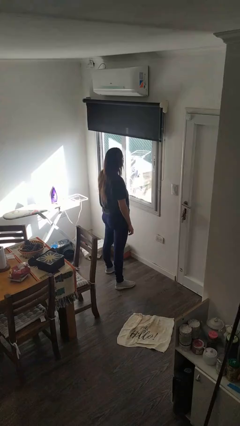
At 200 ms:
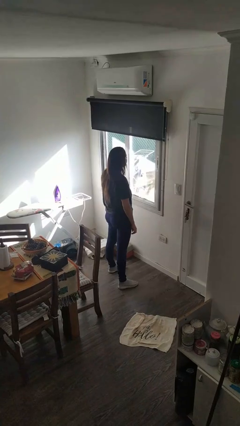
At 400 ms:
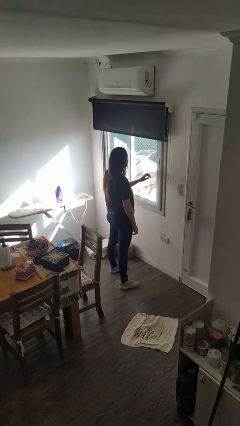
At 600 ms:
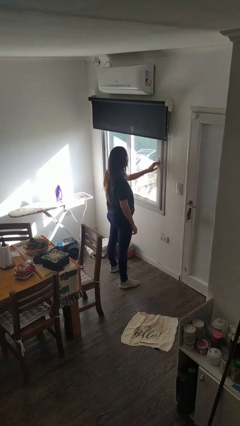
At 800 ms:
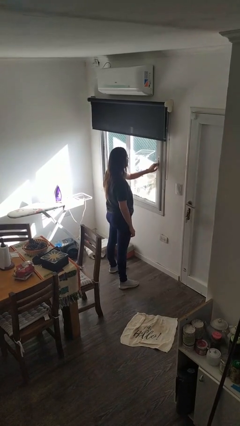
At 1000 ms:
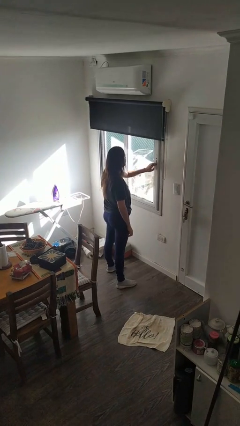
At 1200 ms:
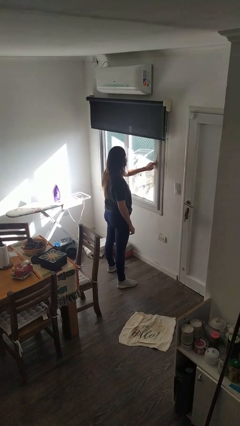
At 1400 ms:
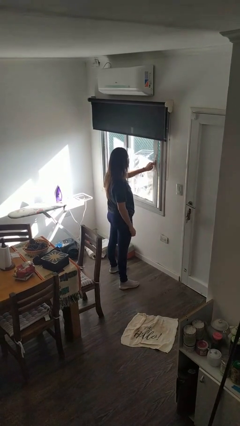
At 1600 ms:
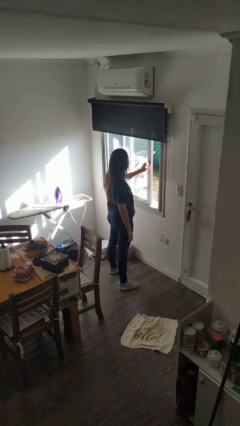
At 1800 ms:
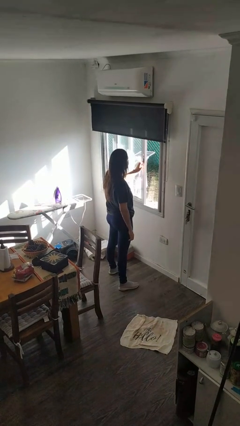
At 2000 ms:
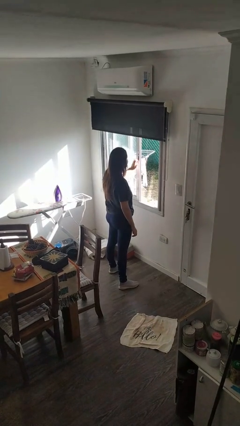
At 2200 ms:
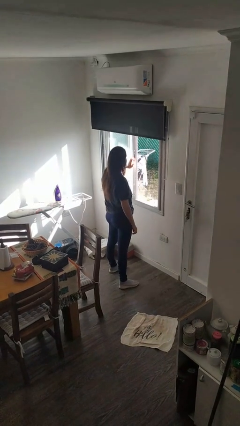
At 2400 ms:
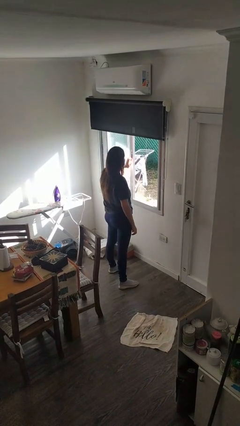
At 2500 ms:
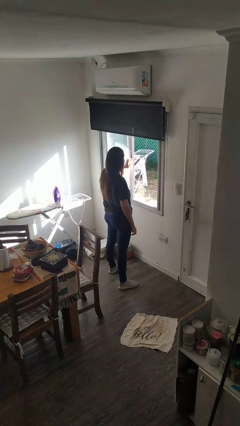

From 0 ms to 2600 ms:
person opens home window

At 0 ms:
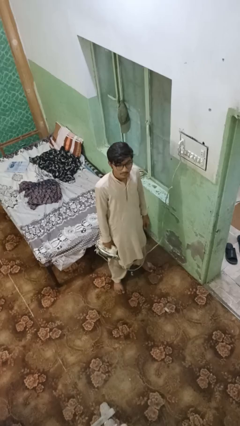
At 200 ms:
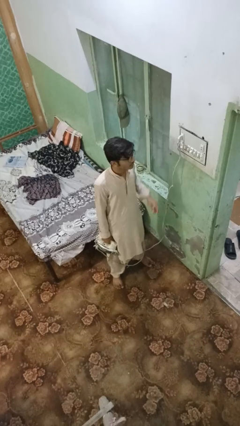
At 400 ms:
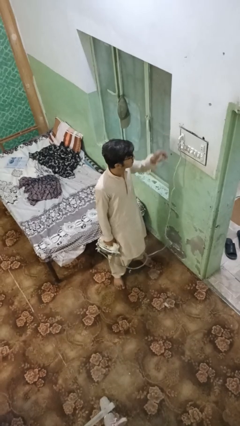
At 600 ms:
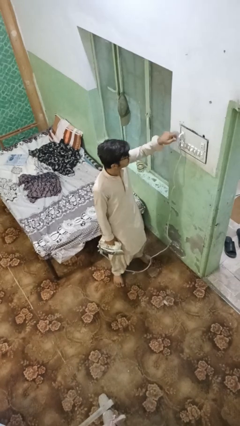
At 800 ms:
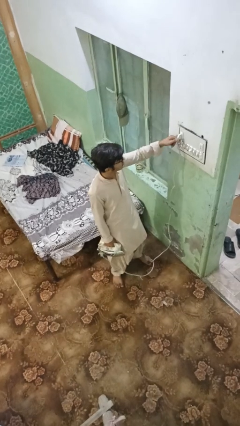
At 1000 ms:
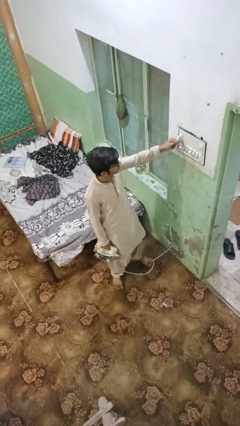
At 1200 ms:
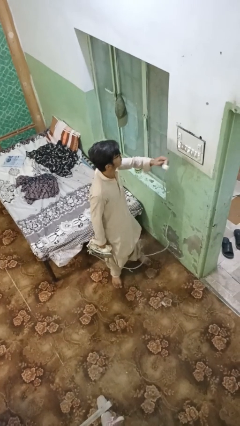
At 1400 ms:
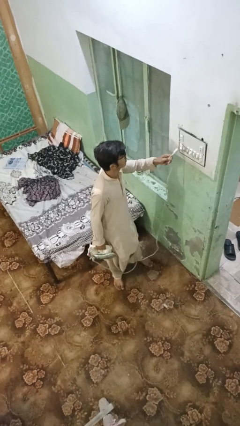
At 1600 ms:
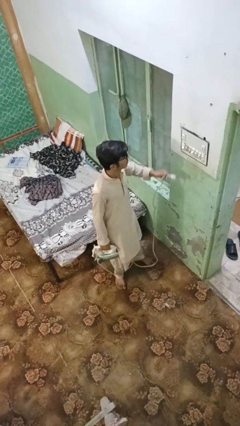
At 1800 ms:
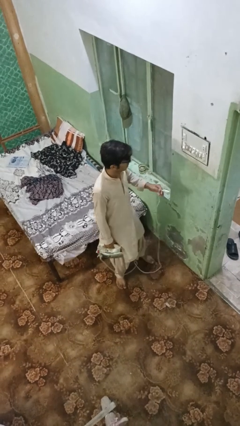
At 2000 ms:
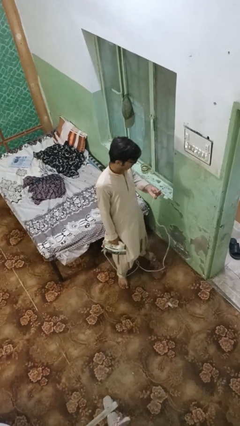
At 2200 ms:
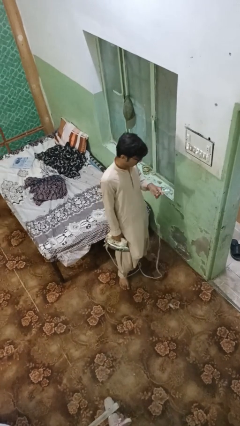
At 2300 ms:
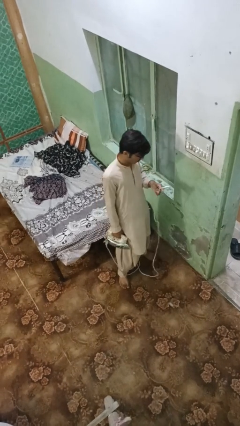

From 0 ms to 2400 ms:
person unplugs from electrical socket

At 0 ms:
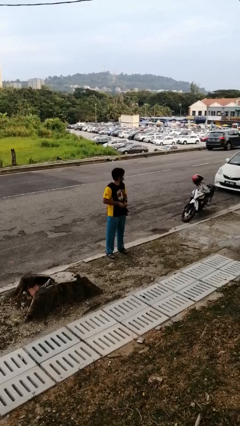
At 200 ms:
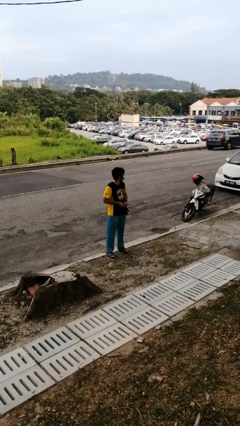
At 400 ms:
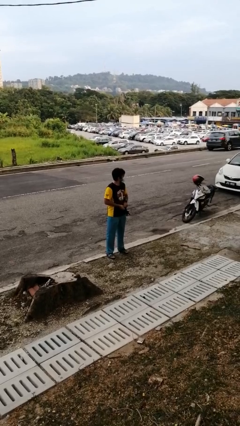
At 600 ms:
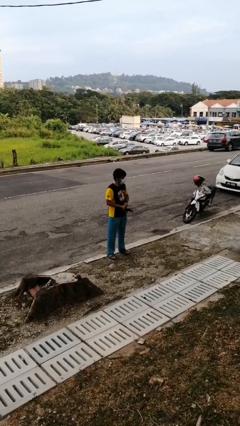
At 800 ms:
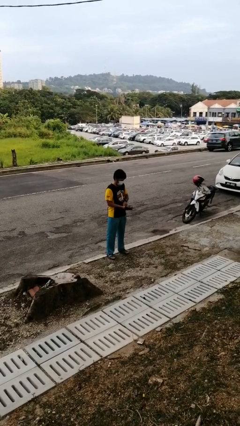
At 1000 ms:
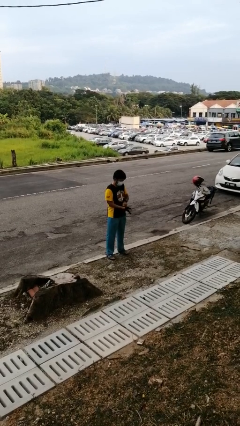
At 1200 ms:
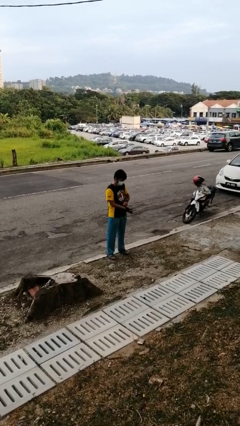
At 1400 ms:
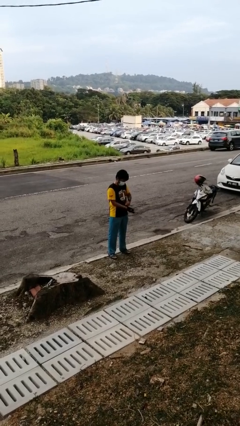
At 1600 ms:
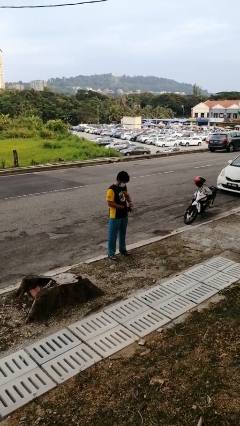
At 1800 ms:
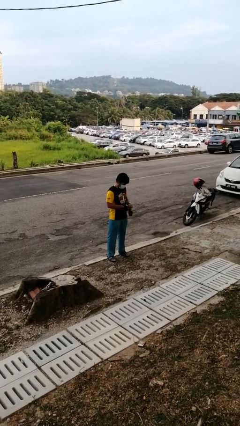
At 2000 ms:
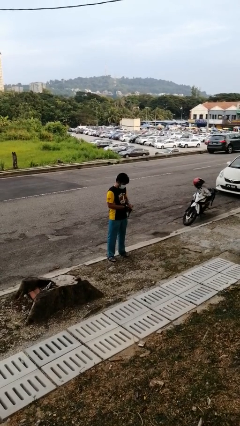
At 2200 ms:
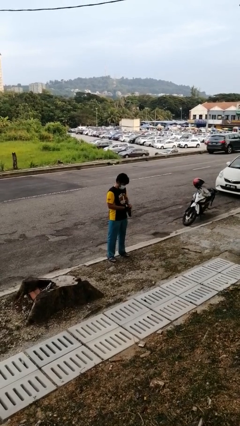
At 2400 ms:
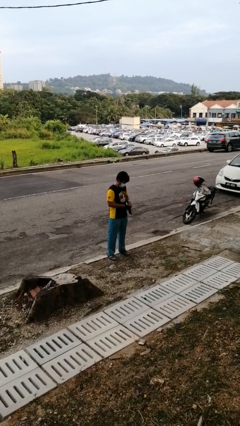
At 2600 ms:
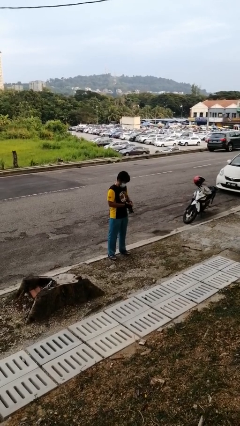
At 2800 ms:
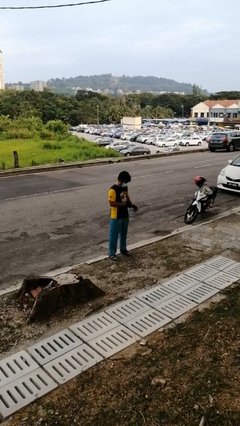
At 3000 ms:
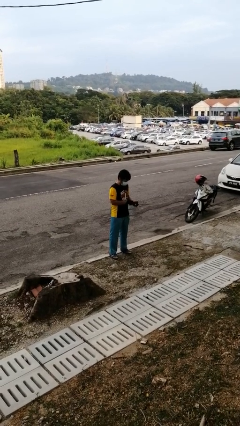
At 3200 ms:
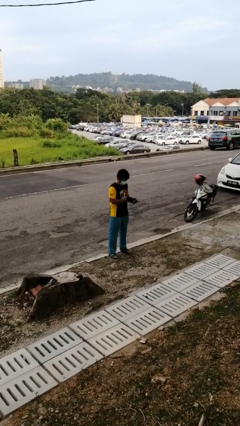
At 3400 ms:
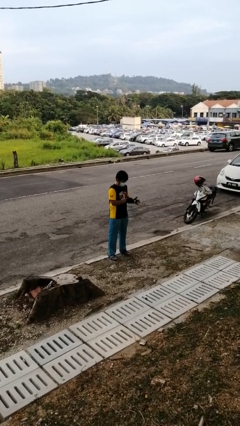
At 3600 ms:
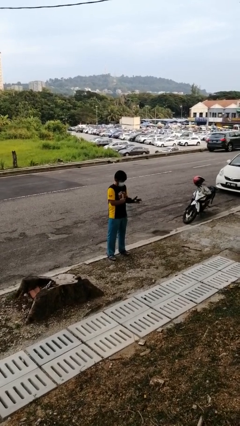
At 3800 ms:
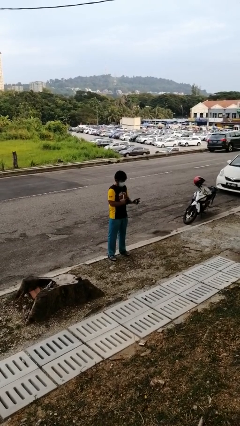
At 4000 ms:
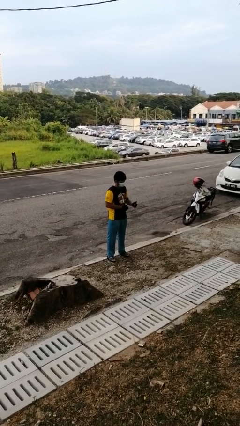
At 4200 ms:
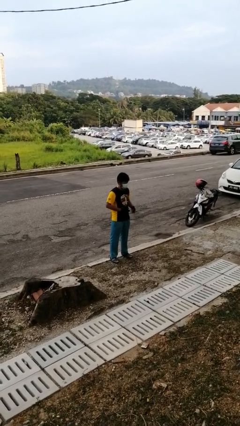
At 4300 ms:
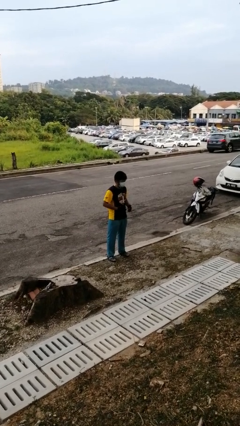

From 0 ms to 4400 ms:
person puts on gloves

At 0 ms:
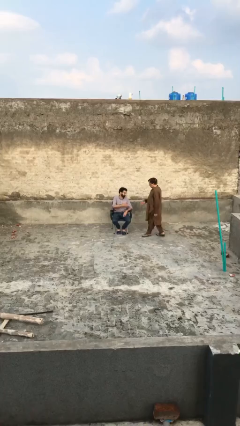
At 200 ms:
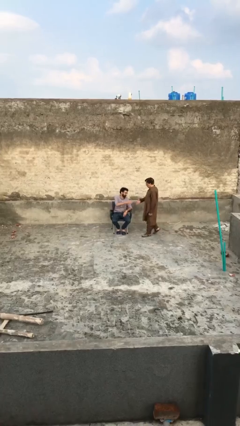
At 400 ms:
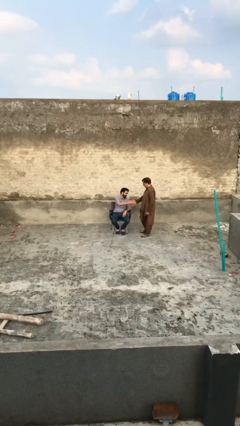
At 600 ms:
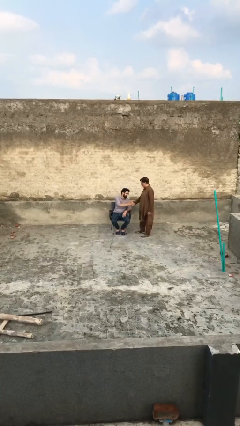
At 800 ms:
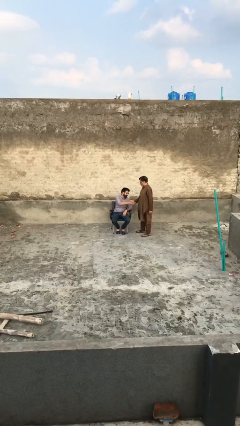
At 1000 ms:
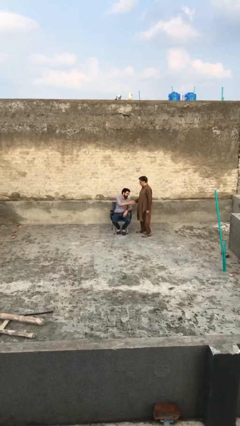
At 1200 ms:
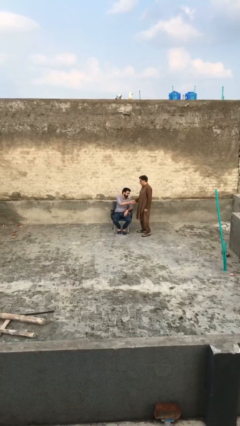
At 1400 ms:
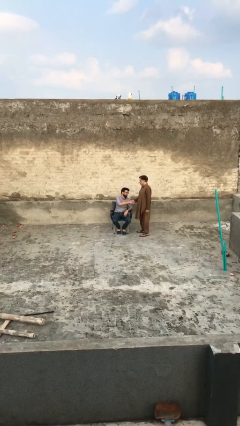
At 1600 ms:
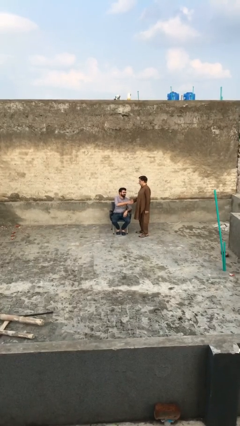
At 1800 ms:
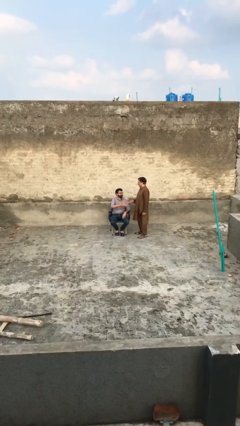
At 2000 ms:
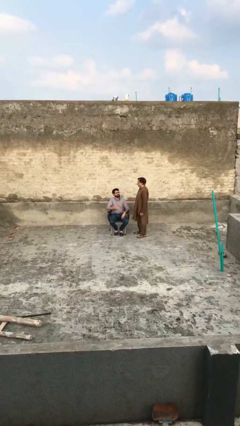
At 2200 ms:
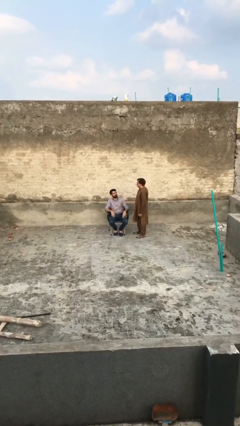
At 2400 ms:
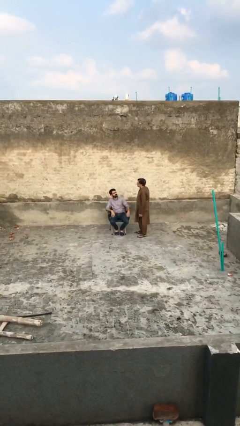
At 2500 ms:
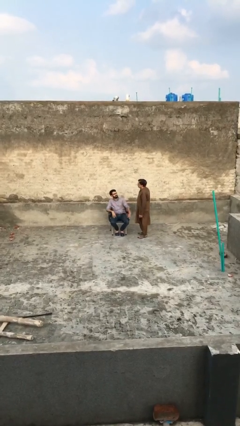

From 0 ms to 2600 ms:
person shakes hand

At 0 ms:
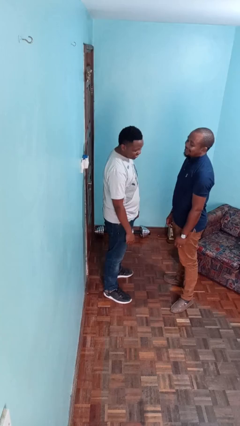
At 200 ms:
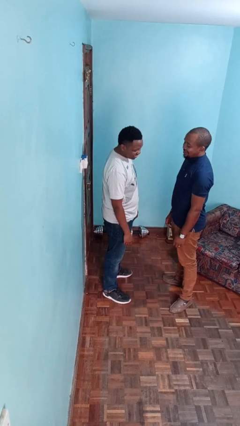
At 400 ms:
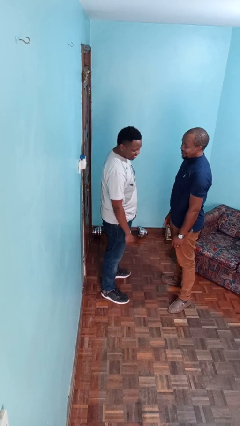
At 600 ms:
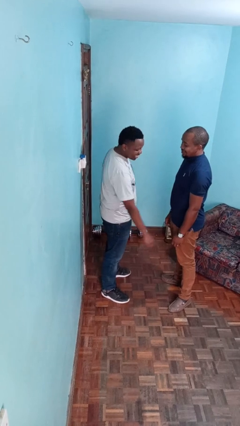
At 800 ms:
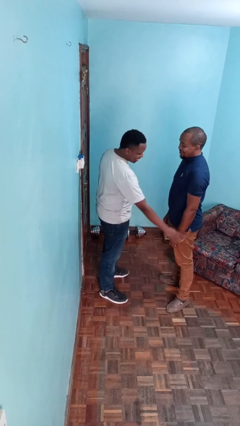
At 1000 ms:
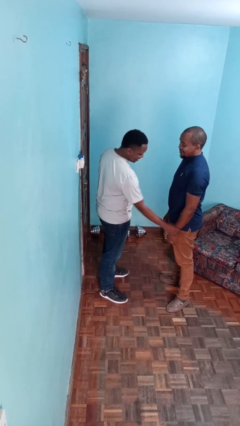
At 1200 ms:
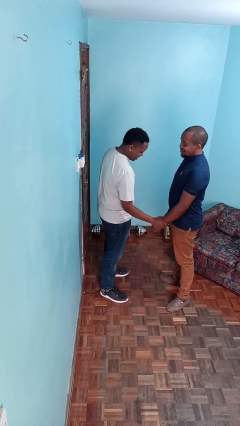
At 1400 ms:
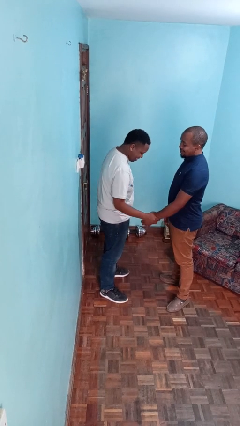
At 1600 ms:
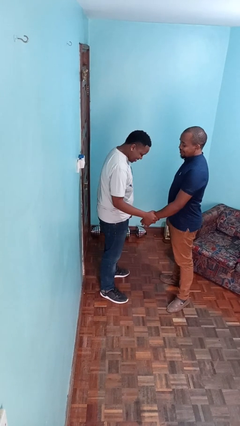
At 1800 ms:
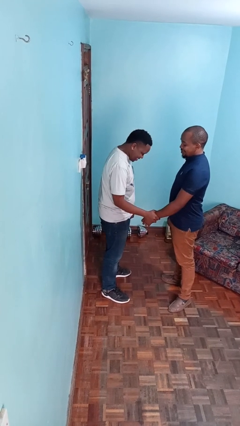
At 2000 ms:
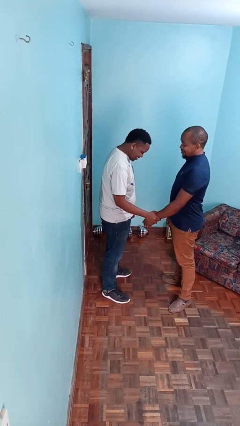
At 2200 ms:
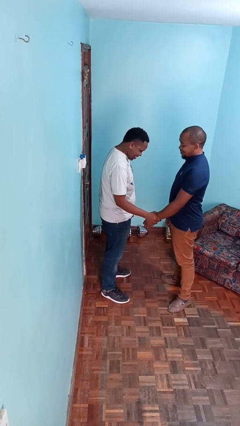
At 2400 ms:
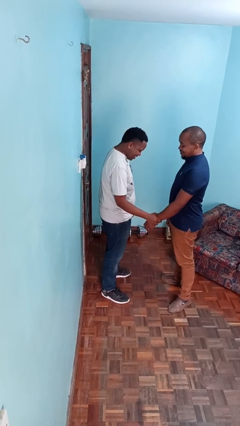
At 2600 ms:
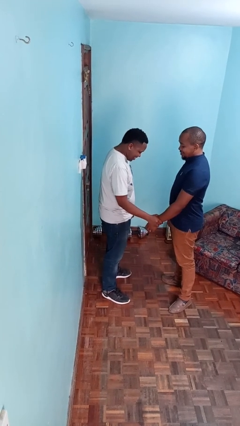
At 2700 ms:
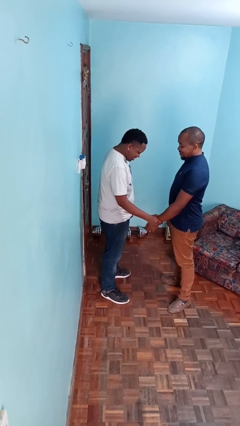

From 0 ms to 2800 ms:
person grabs person by forearm

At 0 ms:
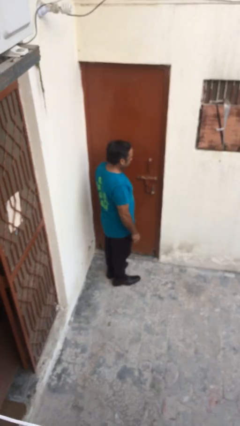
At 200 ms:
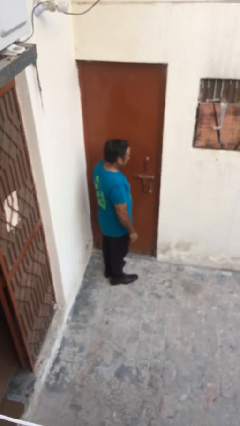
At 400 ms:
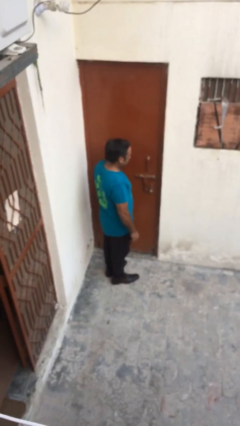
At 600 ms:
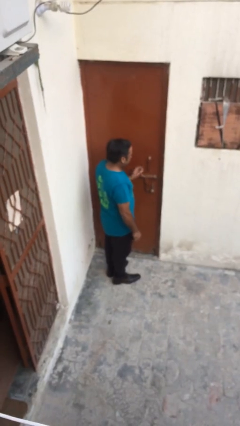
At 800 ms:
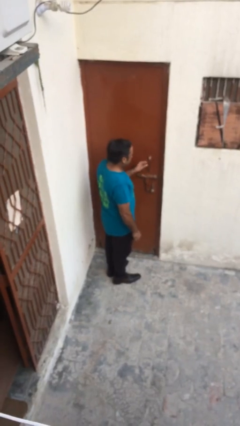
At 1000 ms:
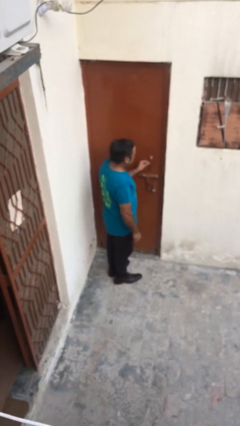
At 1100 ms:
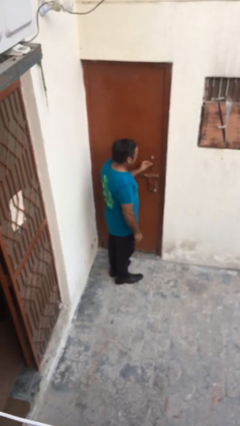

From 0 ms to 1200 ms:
person opens facility door

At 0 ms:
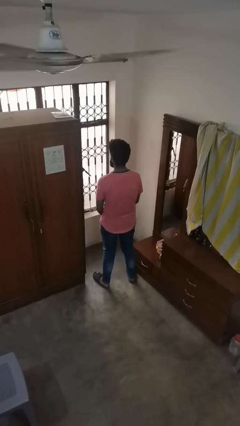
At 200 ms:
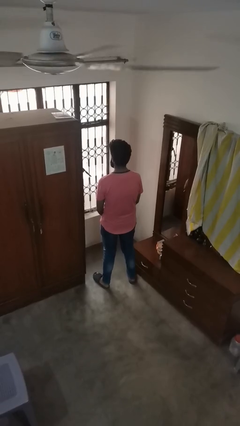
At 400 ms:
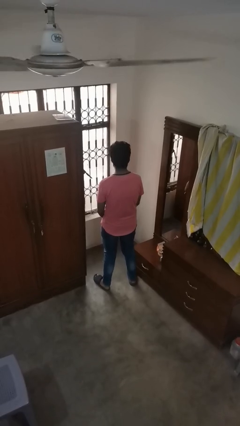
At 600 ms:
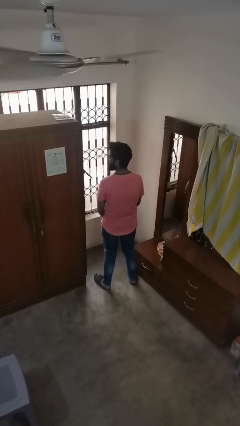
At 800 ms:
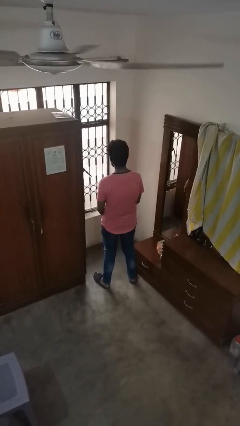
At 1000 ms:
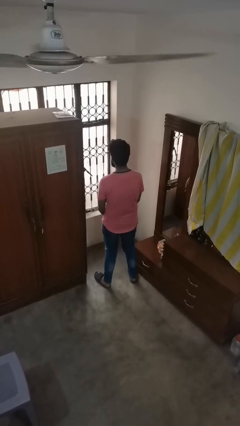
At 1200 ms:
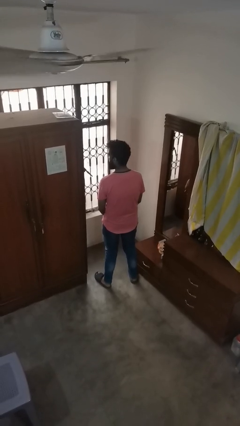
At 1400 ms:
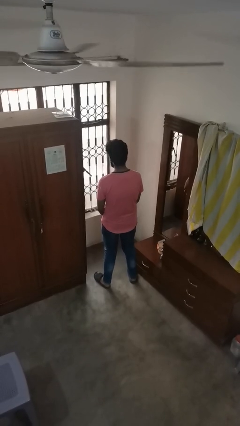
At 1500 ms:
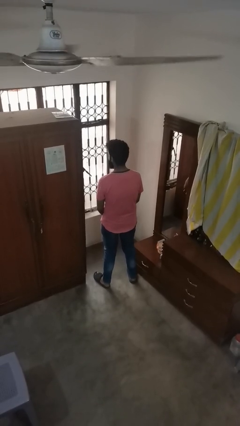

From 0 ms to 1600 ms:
person shakes head
